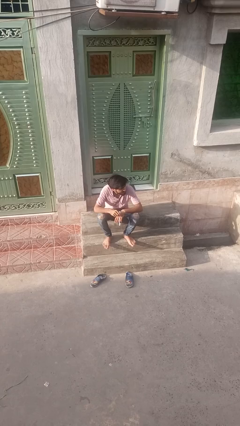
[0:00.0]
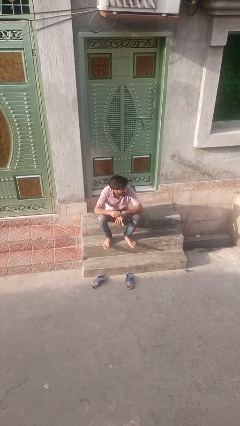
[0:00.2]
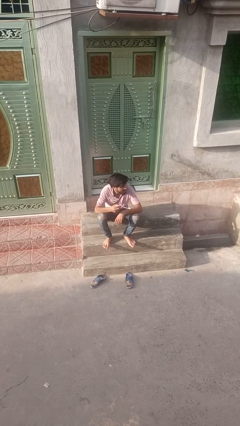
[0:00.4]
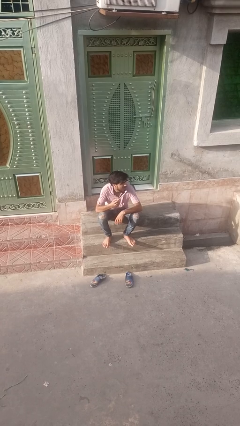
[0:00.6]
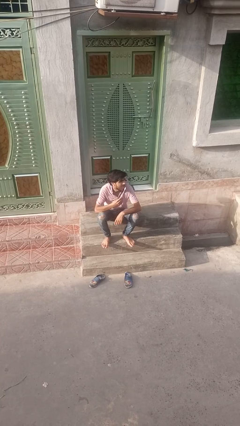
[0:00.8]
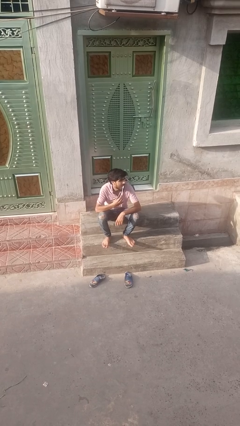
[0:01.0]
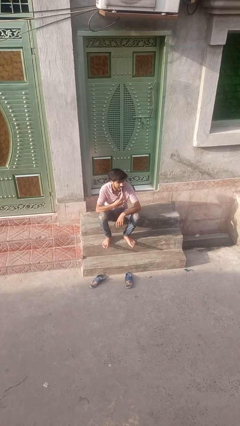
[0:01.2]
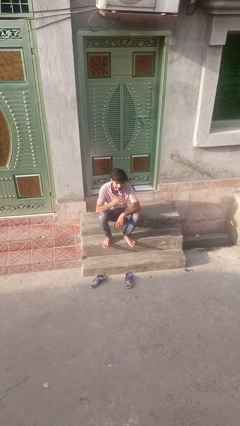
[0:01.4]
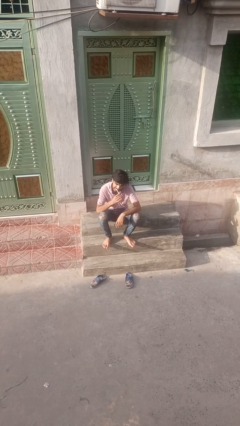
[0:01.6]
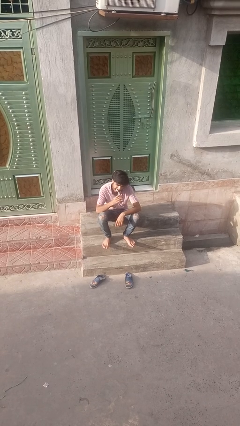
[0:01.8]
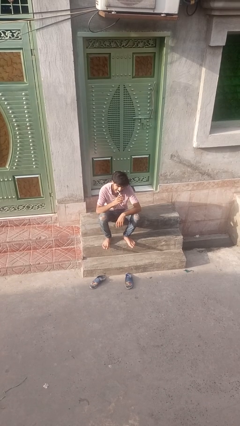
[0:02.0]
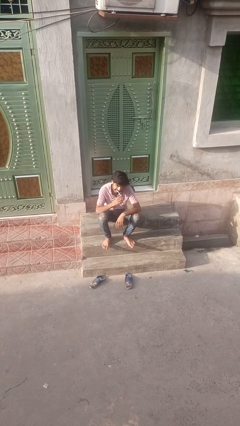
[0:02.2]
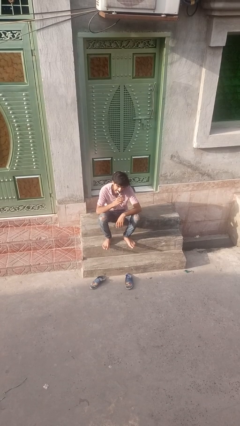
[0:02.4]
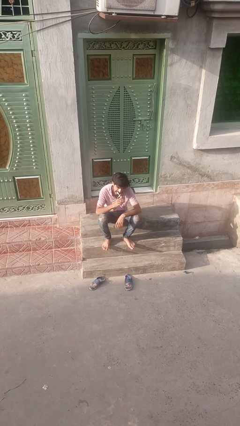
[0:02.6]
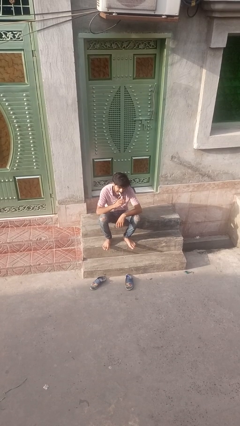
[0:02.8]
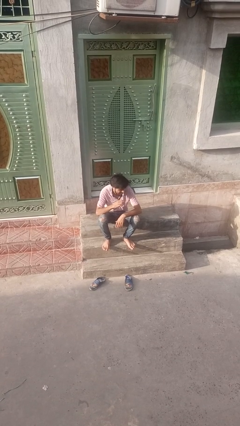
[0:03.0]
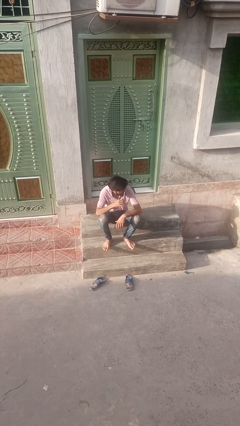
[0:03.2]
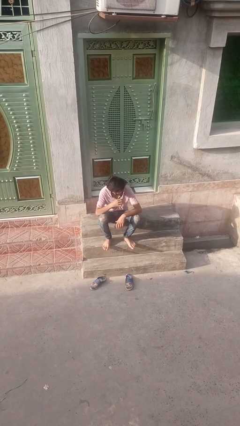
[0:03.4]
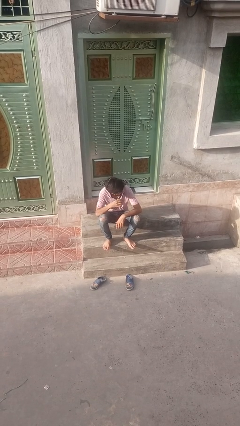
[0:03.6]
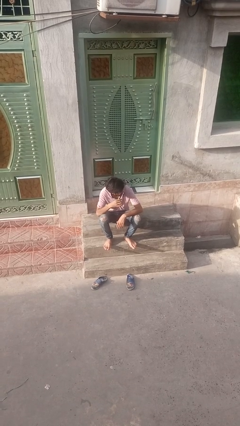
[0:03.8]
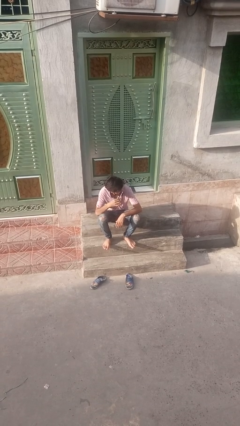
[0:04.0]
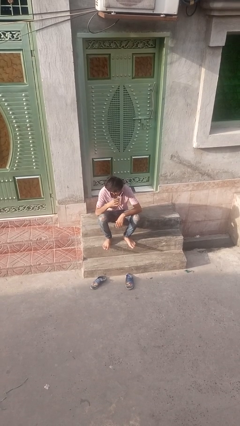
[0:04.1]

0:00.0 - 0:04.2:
person brushes hair

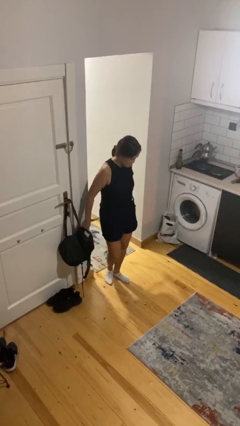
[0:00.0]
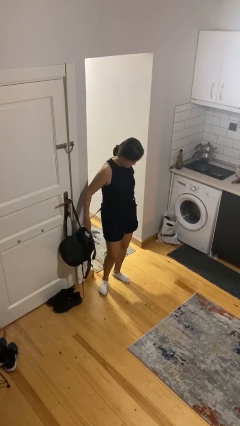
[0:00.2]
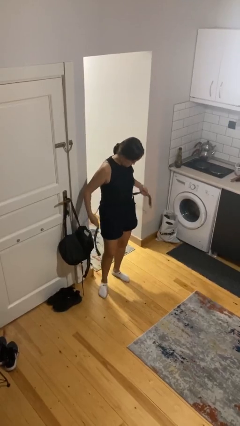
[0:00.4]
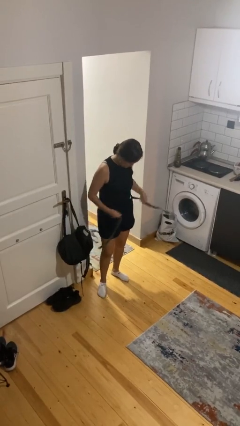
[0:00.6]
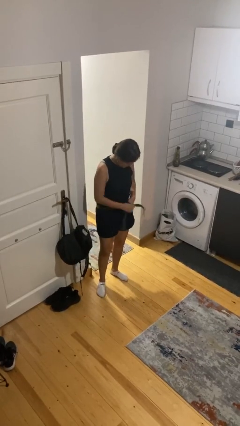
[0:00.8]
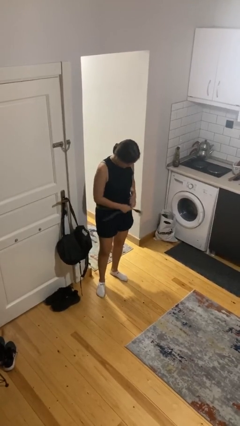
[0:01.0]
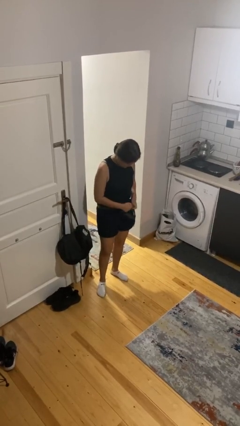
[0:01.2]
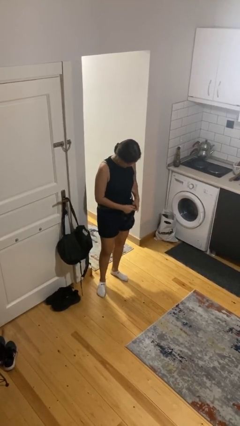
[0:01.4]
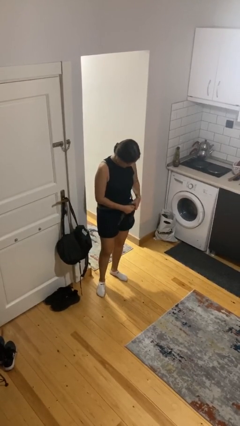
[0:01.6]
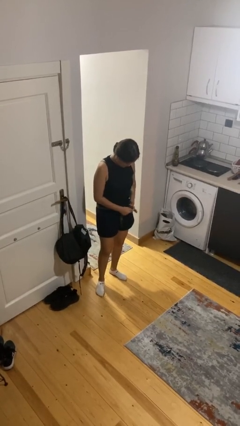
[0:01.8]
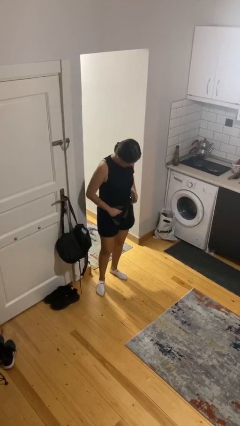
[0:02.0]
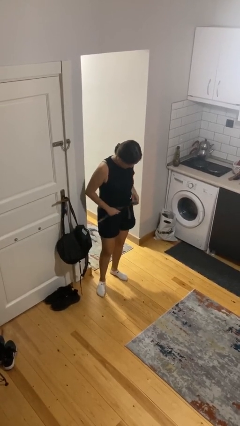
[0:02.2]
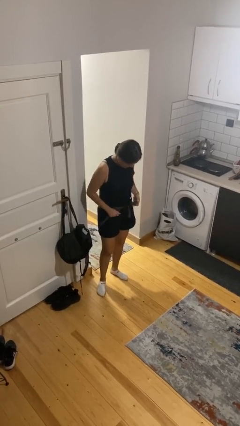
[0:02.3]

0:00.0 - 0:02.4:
person puts on belt

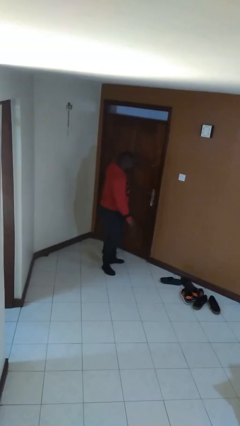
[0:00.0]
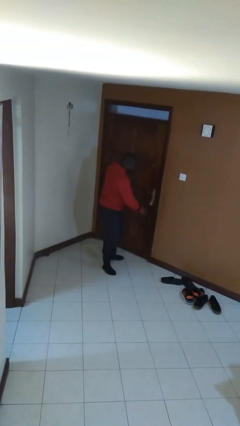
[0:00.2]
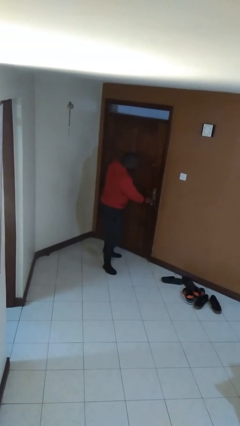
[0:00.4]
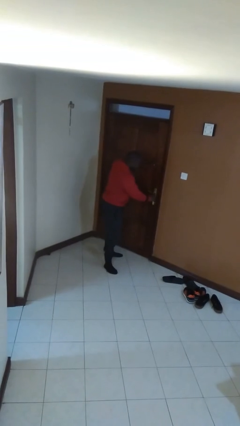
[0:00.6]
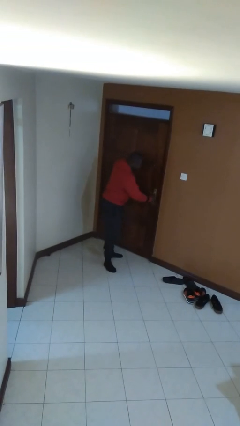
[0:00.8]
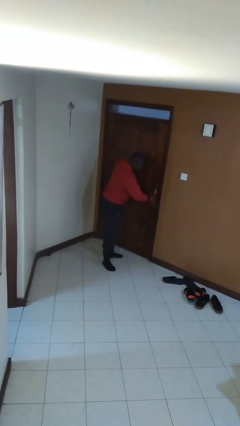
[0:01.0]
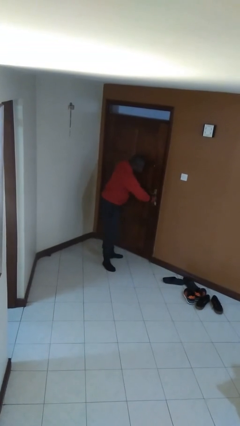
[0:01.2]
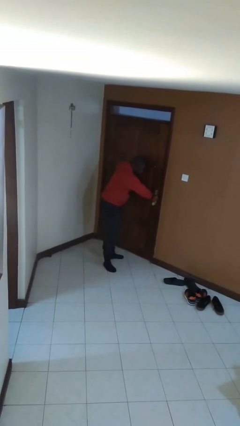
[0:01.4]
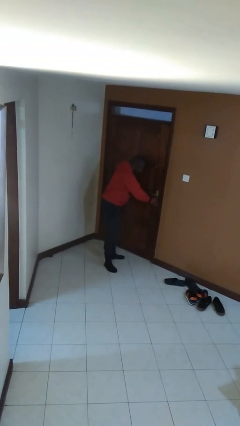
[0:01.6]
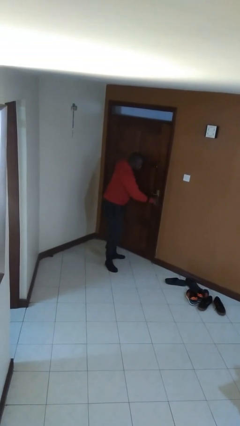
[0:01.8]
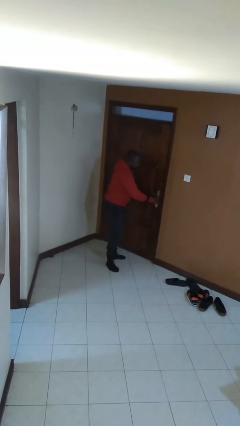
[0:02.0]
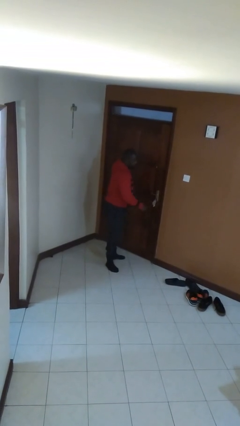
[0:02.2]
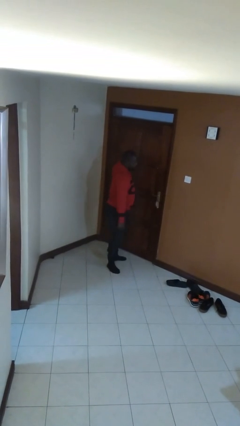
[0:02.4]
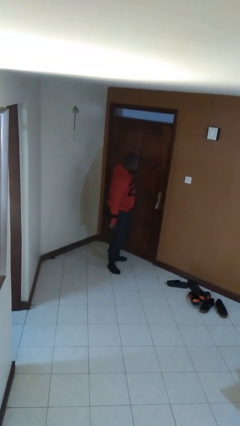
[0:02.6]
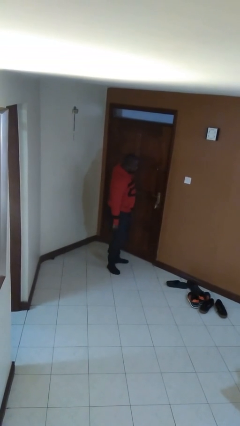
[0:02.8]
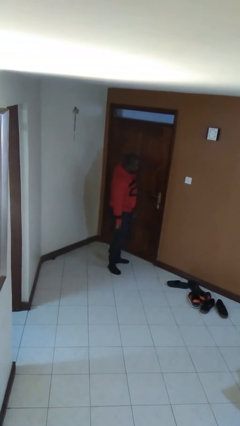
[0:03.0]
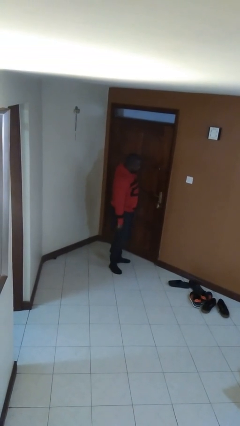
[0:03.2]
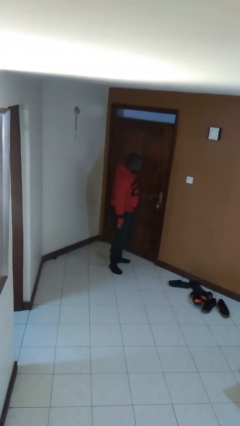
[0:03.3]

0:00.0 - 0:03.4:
person unlocks door with keys

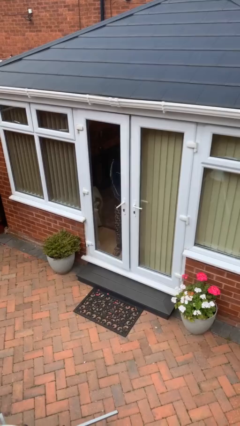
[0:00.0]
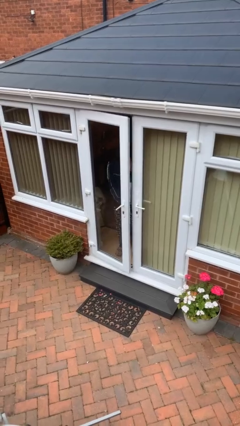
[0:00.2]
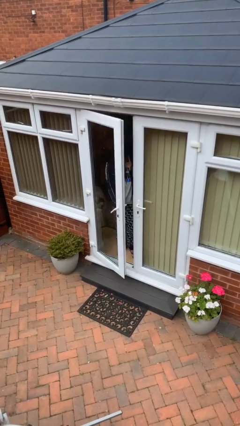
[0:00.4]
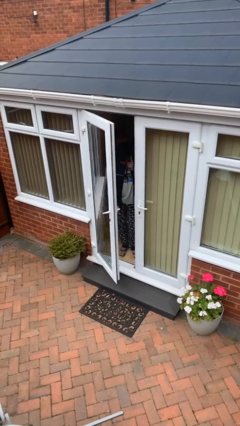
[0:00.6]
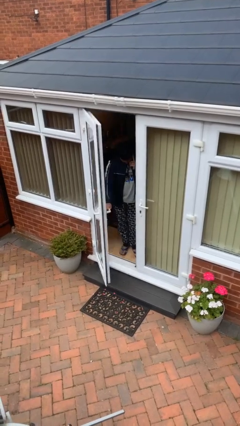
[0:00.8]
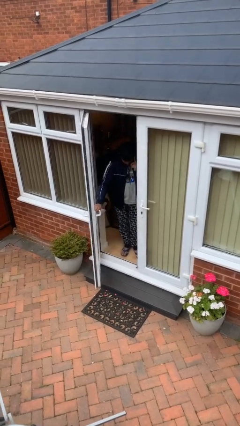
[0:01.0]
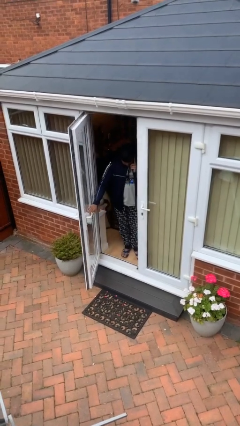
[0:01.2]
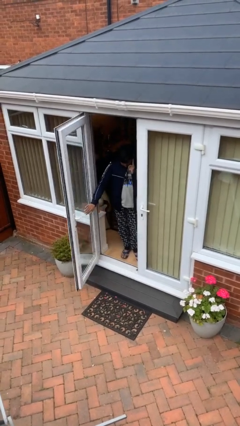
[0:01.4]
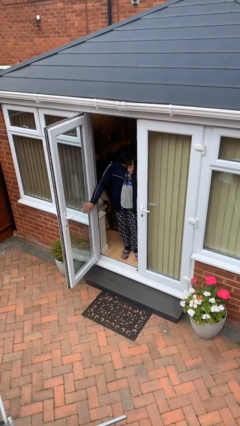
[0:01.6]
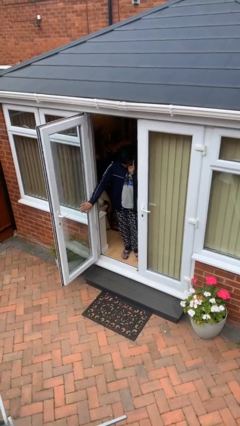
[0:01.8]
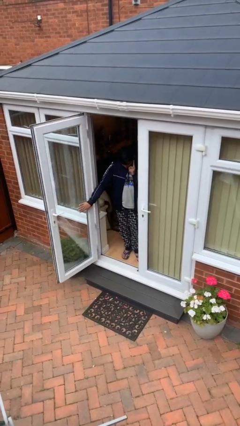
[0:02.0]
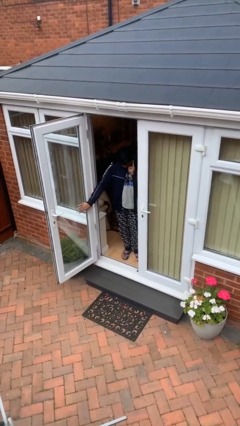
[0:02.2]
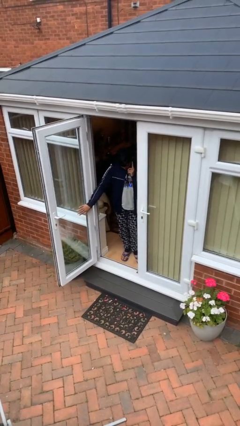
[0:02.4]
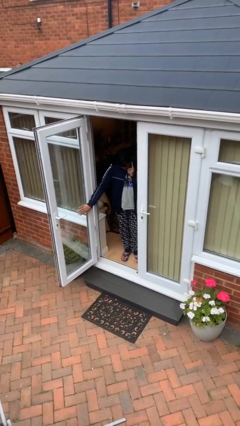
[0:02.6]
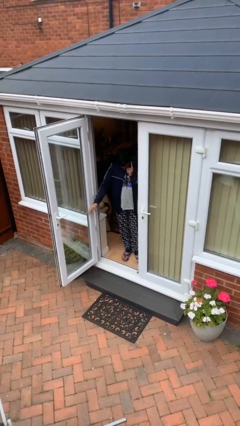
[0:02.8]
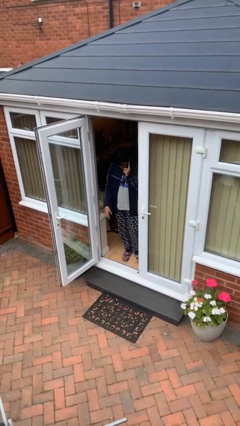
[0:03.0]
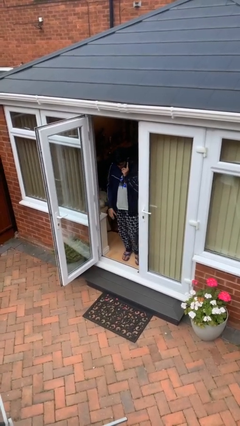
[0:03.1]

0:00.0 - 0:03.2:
person opens facility door

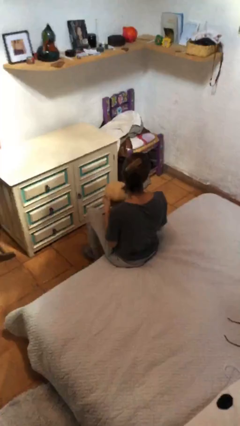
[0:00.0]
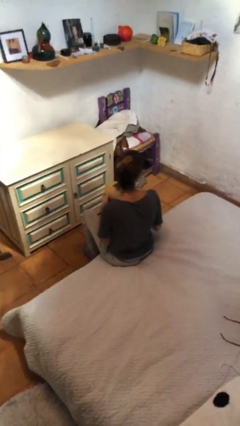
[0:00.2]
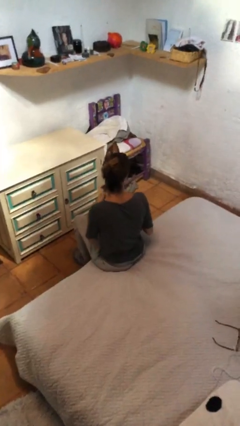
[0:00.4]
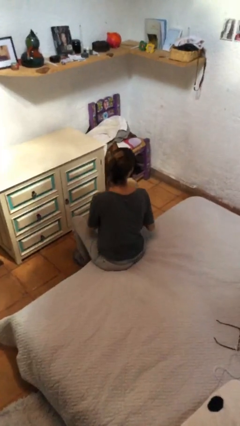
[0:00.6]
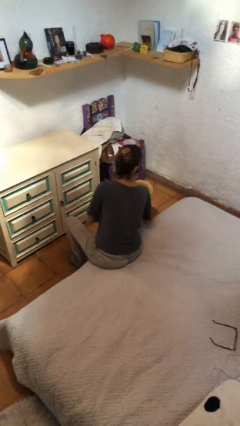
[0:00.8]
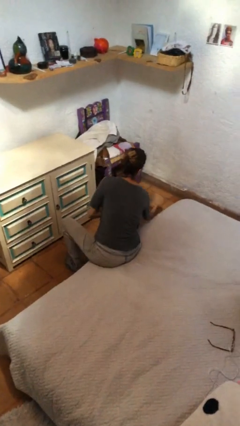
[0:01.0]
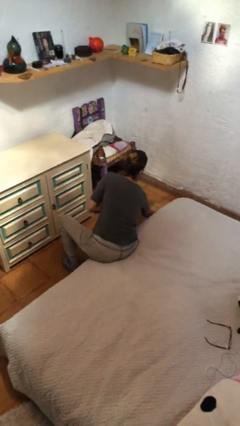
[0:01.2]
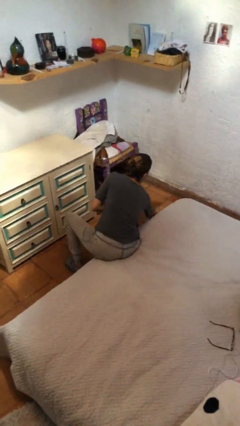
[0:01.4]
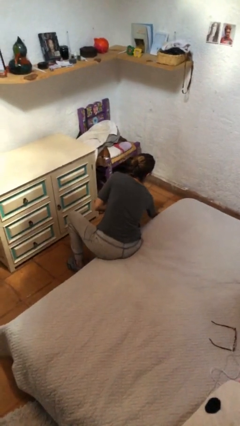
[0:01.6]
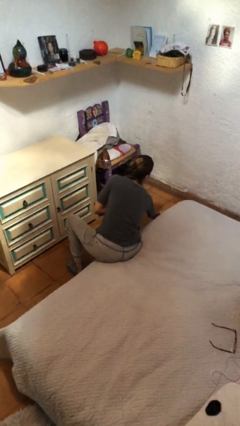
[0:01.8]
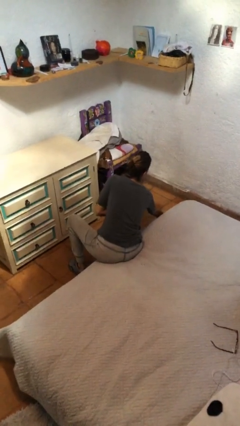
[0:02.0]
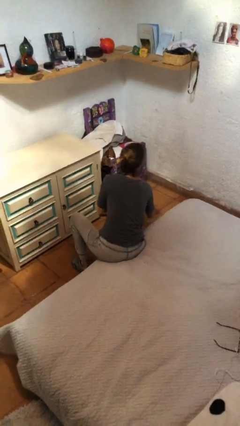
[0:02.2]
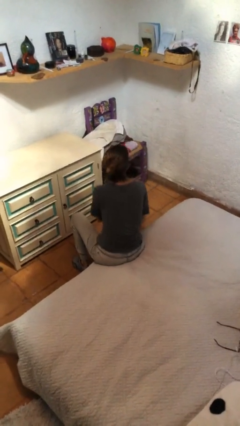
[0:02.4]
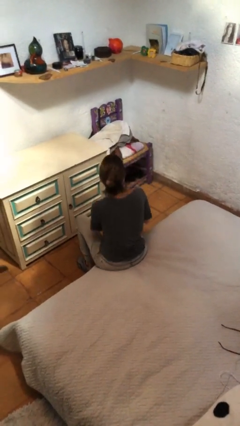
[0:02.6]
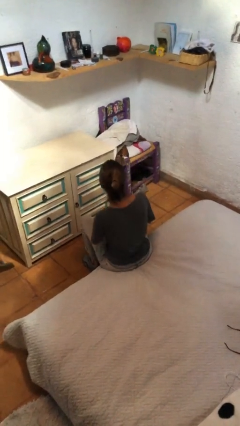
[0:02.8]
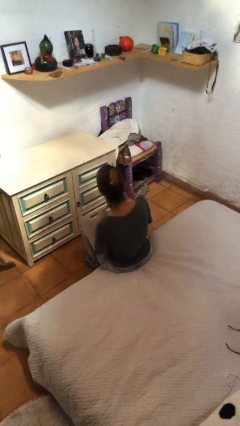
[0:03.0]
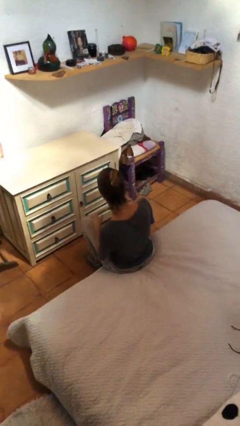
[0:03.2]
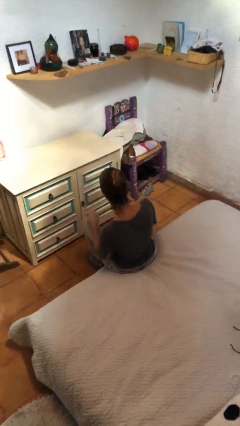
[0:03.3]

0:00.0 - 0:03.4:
person puts down object on floor

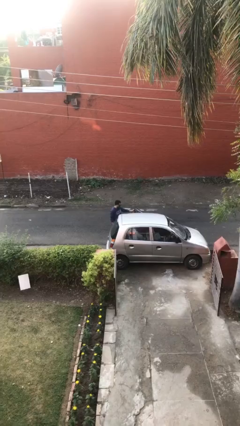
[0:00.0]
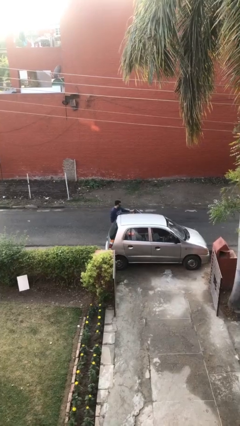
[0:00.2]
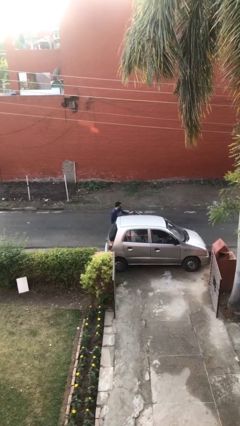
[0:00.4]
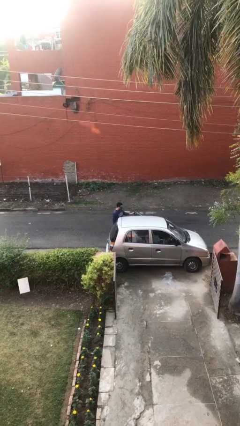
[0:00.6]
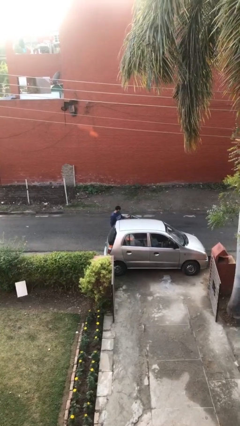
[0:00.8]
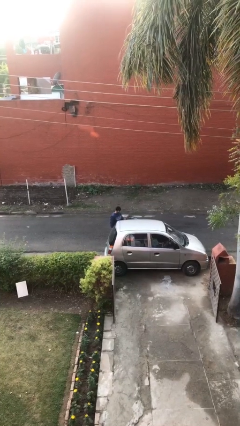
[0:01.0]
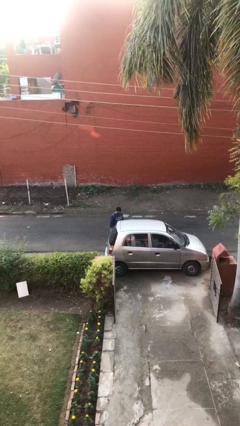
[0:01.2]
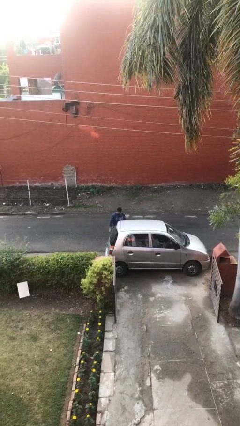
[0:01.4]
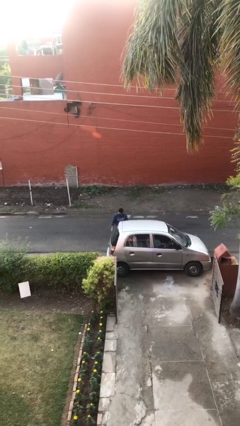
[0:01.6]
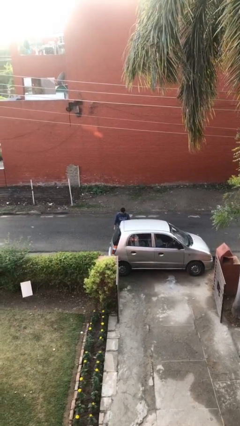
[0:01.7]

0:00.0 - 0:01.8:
person closes car door
